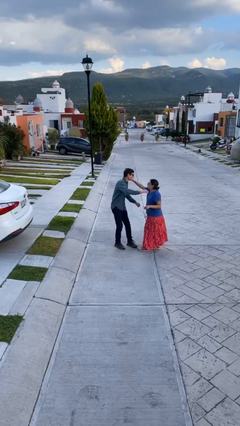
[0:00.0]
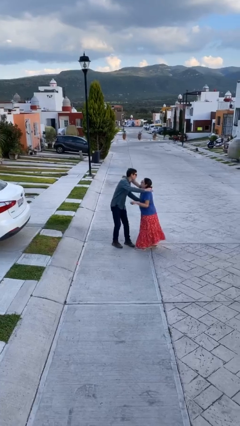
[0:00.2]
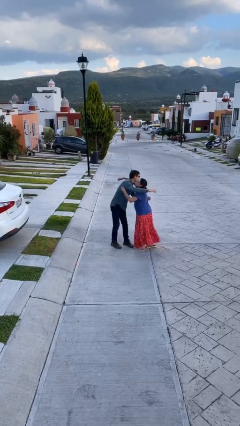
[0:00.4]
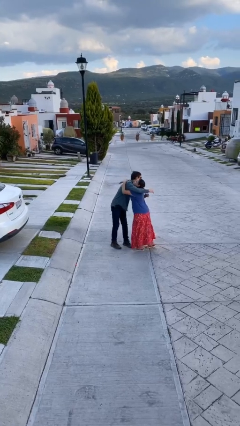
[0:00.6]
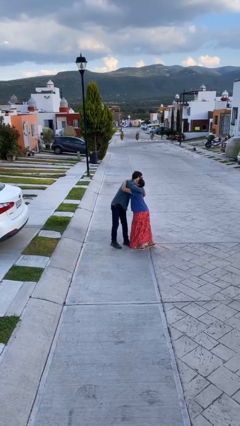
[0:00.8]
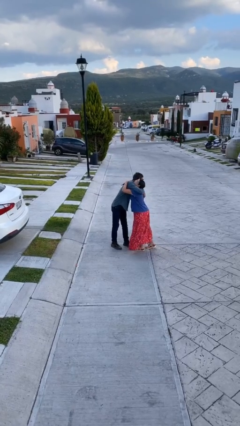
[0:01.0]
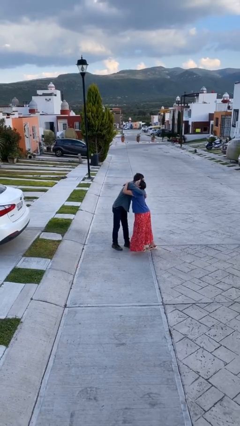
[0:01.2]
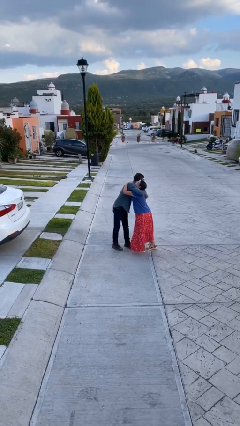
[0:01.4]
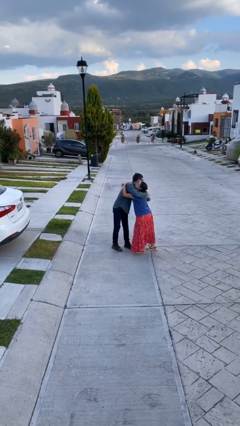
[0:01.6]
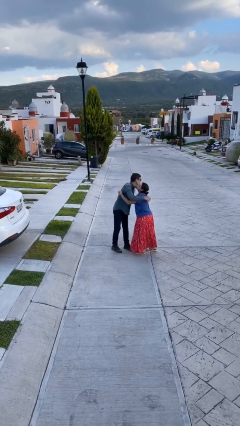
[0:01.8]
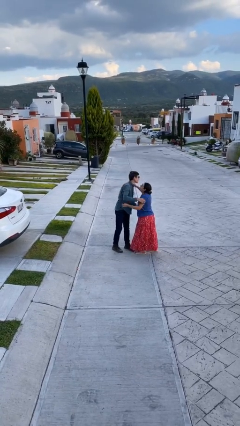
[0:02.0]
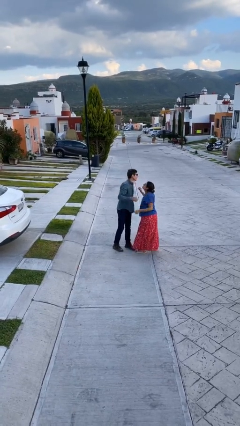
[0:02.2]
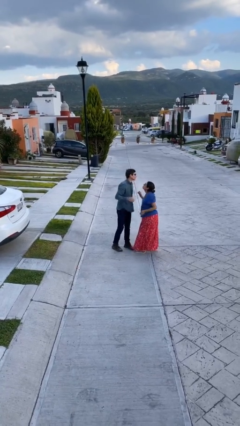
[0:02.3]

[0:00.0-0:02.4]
person embraces person

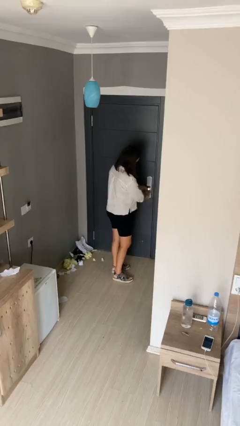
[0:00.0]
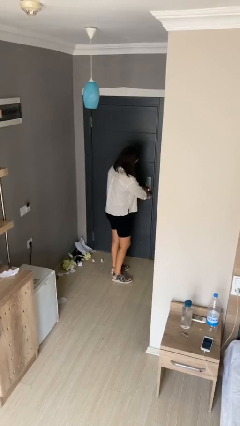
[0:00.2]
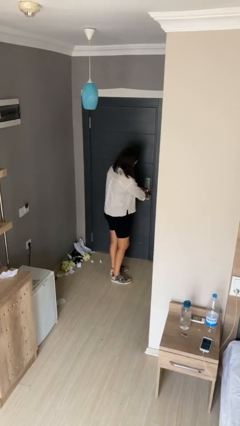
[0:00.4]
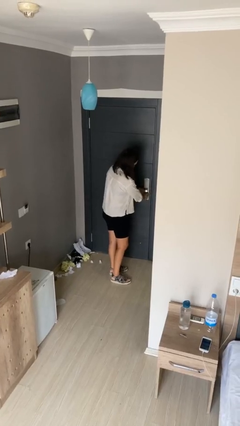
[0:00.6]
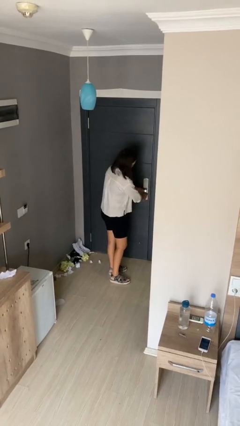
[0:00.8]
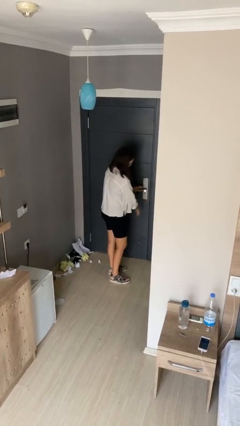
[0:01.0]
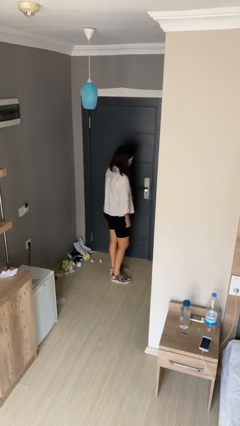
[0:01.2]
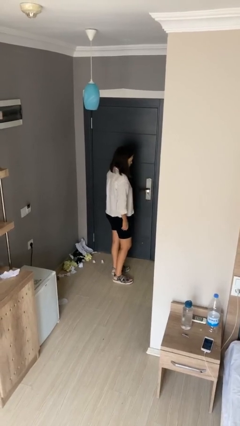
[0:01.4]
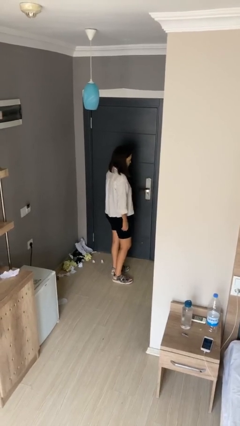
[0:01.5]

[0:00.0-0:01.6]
person locks door with keys

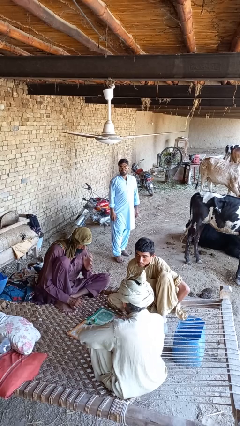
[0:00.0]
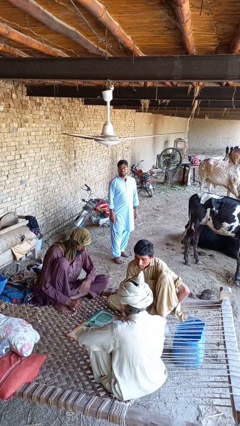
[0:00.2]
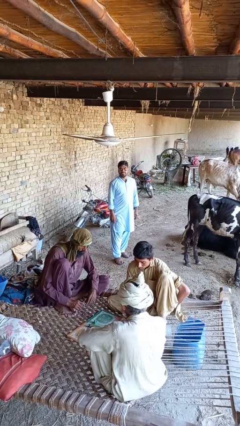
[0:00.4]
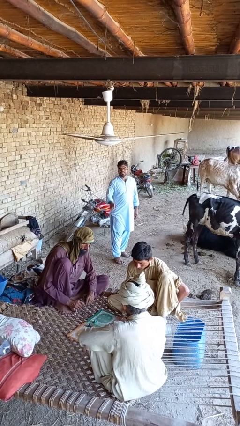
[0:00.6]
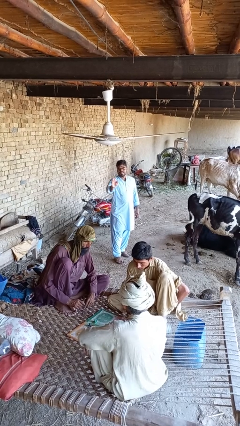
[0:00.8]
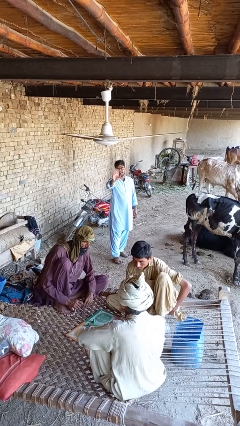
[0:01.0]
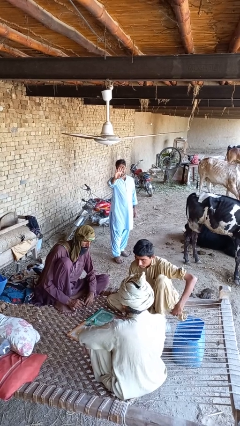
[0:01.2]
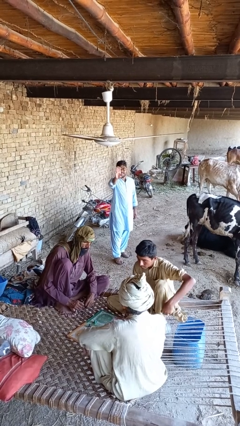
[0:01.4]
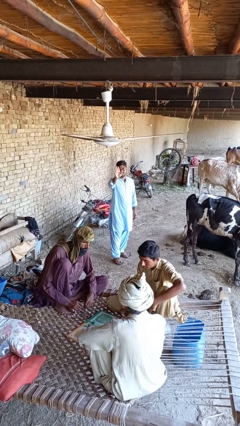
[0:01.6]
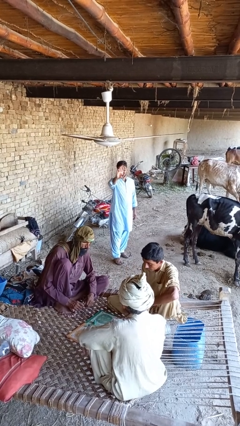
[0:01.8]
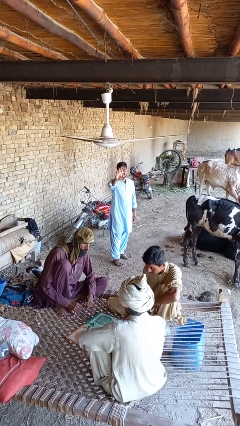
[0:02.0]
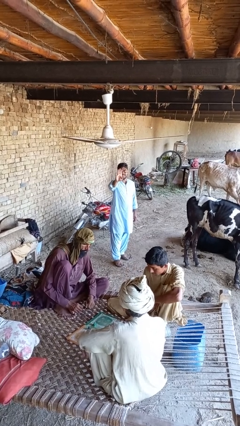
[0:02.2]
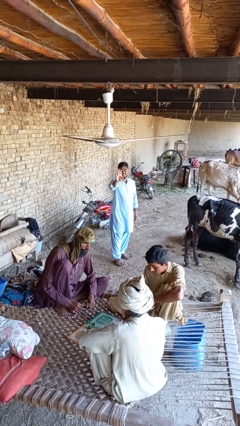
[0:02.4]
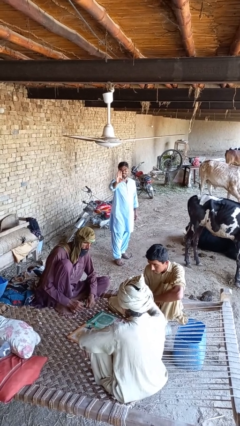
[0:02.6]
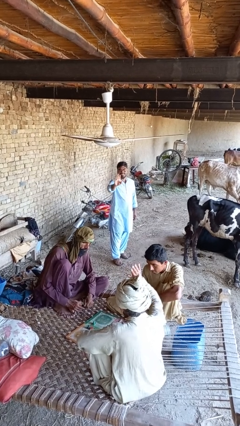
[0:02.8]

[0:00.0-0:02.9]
person waves at person

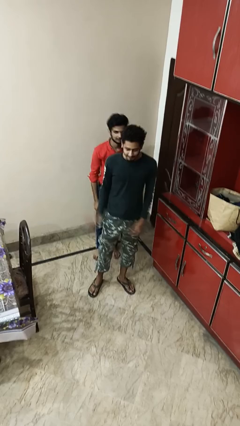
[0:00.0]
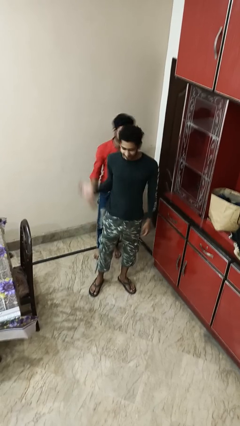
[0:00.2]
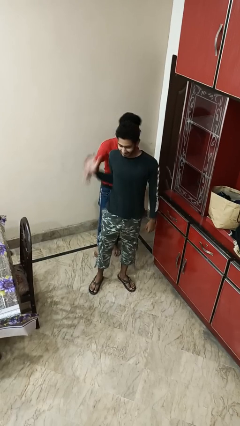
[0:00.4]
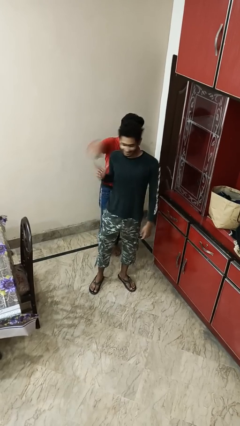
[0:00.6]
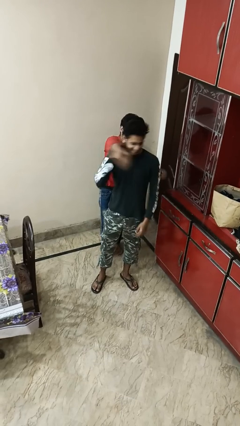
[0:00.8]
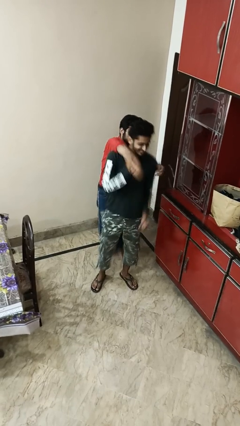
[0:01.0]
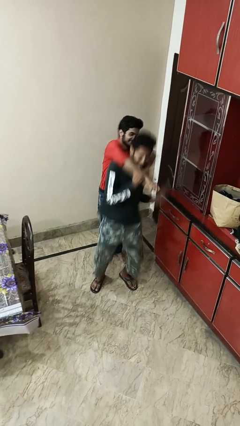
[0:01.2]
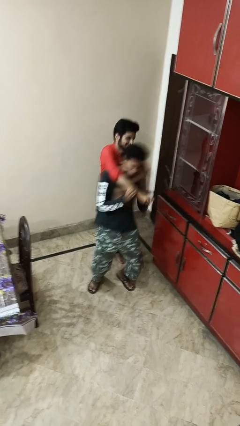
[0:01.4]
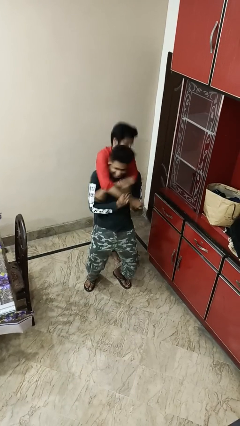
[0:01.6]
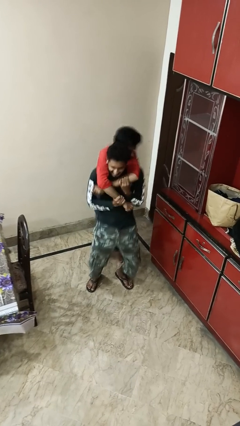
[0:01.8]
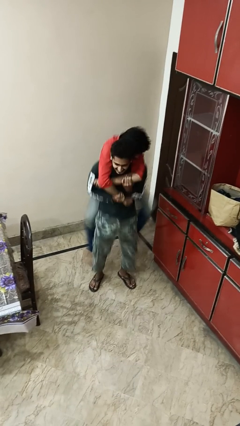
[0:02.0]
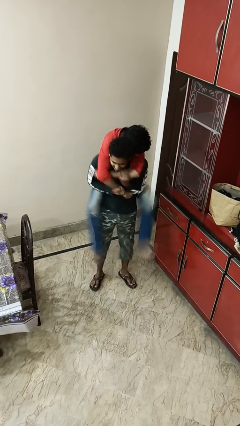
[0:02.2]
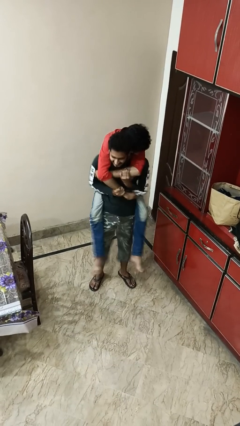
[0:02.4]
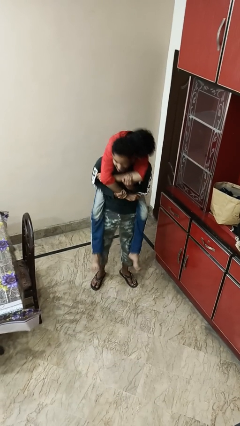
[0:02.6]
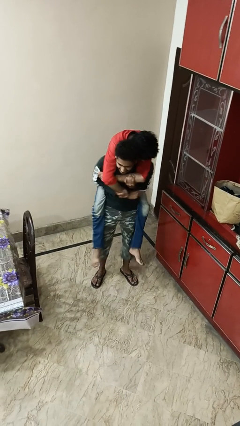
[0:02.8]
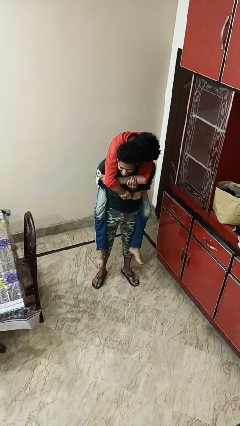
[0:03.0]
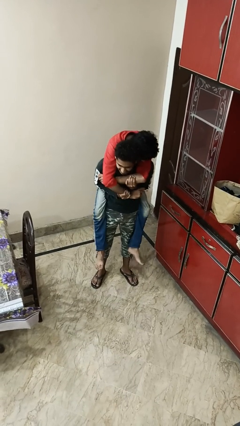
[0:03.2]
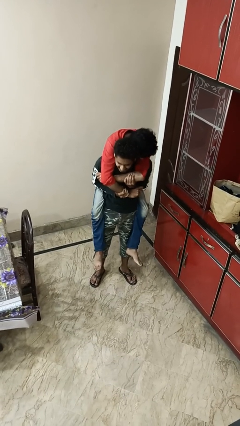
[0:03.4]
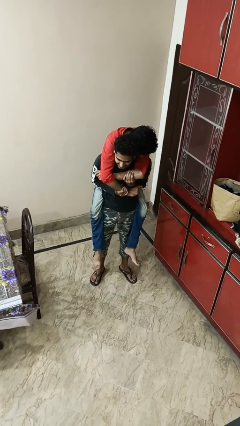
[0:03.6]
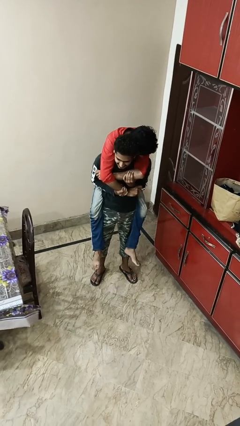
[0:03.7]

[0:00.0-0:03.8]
person carries person over shoulder

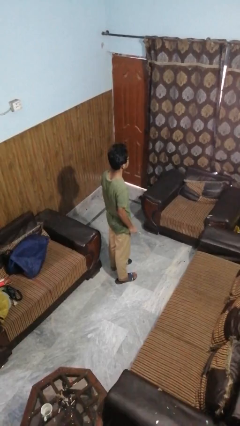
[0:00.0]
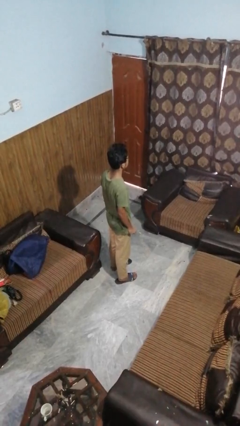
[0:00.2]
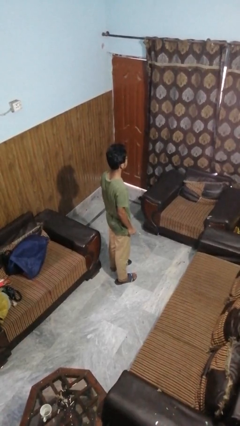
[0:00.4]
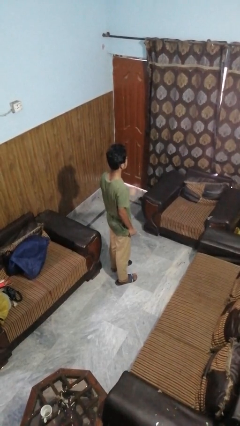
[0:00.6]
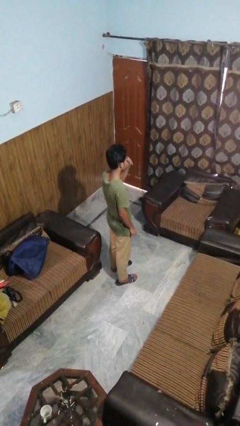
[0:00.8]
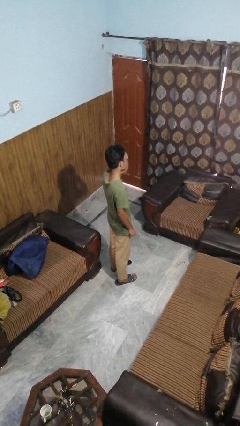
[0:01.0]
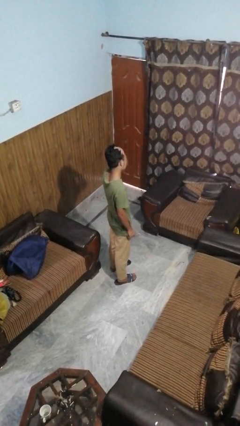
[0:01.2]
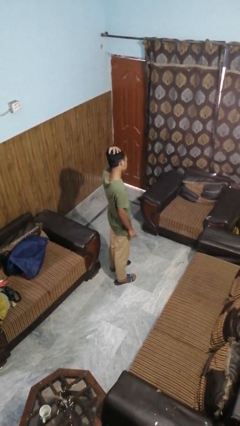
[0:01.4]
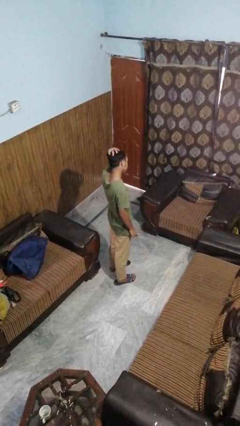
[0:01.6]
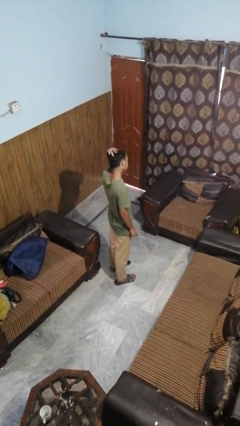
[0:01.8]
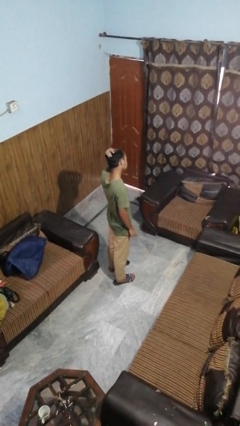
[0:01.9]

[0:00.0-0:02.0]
person strokes hair

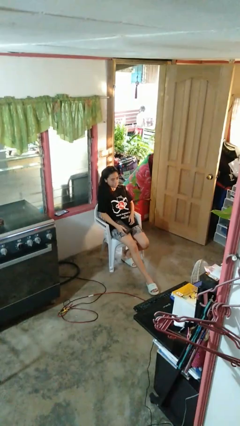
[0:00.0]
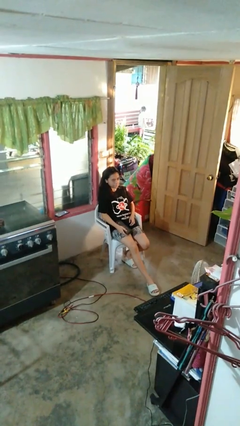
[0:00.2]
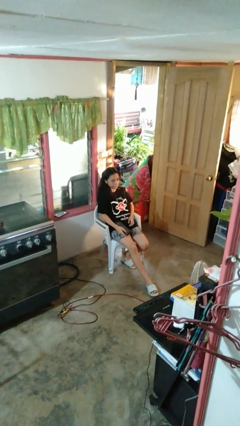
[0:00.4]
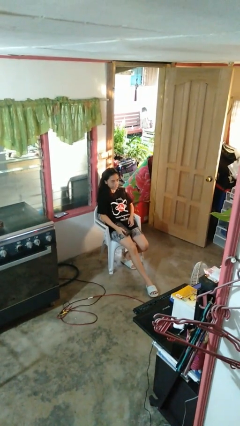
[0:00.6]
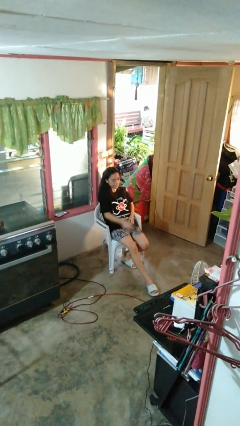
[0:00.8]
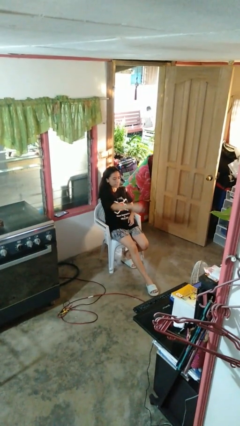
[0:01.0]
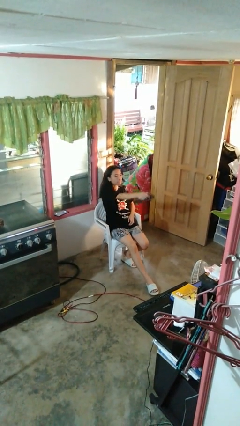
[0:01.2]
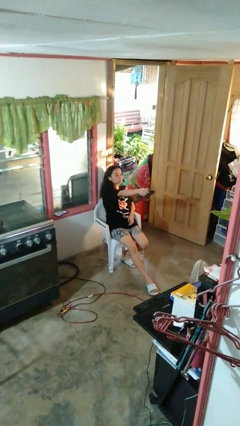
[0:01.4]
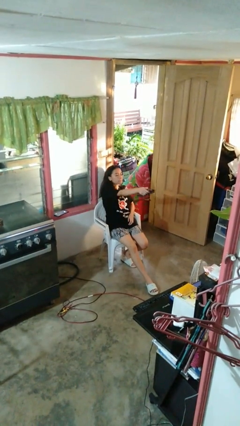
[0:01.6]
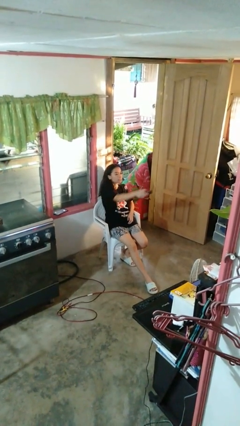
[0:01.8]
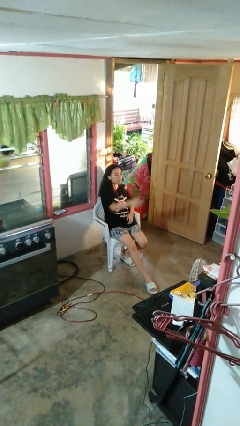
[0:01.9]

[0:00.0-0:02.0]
person uses television remote

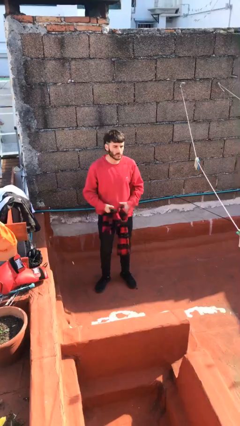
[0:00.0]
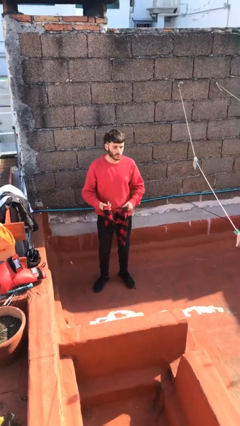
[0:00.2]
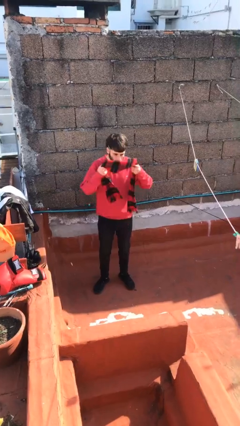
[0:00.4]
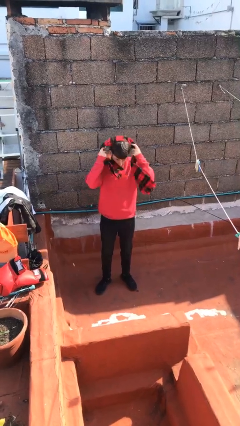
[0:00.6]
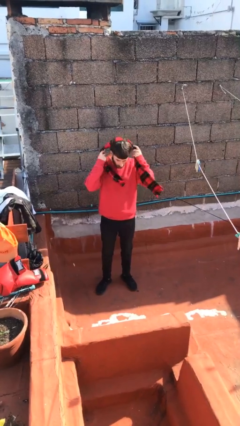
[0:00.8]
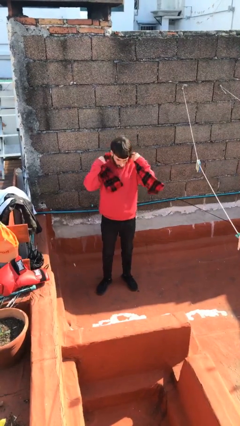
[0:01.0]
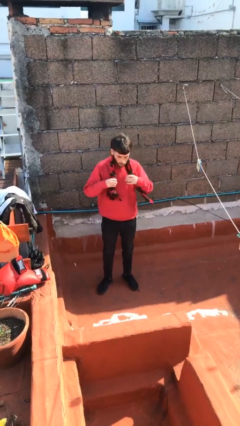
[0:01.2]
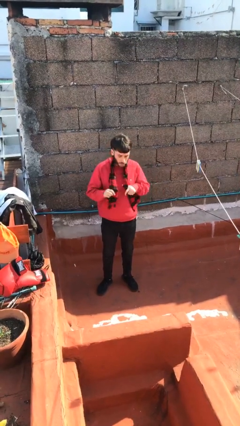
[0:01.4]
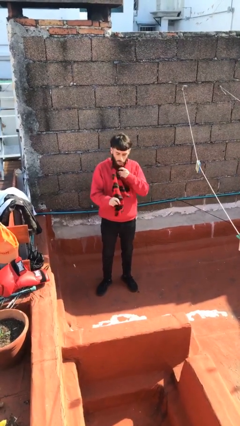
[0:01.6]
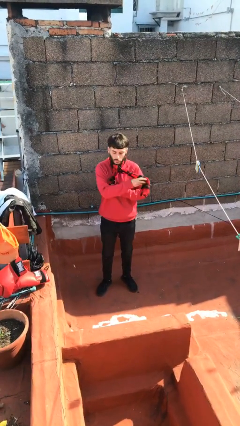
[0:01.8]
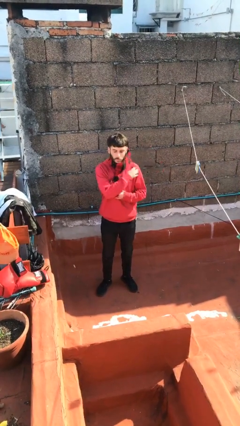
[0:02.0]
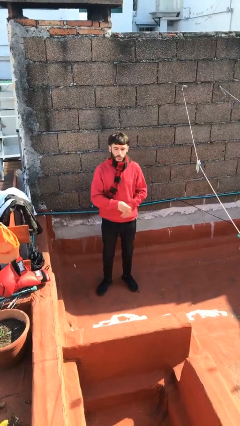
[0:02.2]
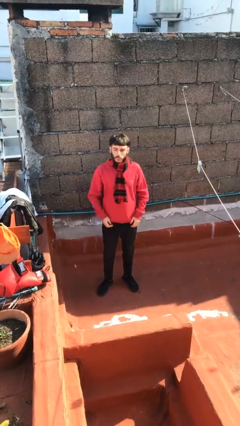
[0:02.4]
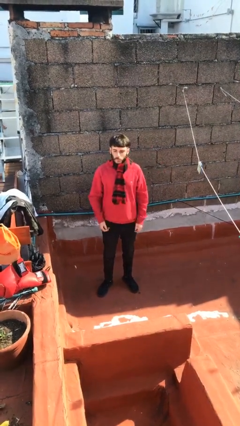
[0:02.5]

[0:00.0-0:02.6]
person puts on scarf
